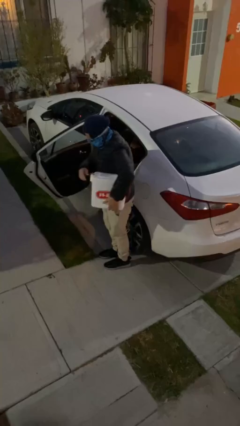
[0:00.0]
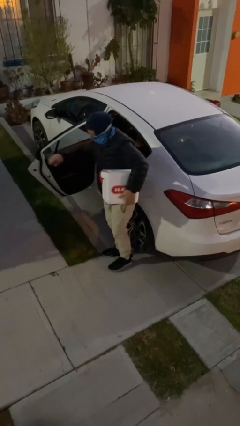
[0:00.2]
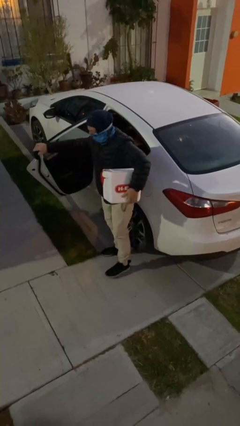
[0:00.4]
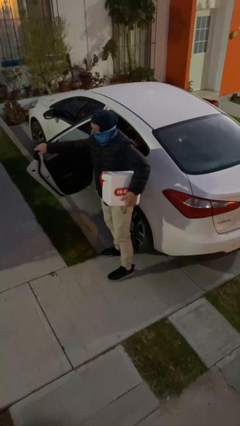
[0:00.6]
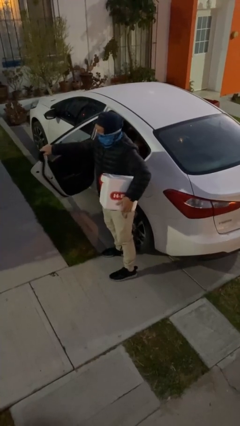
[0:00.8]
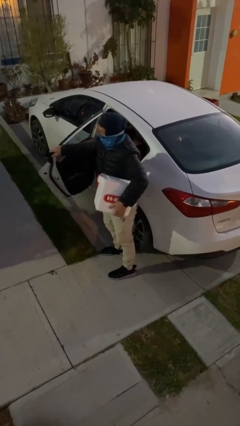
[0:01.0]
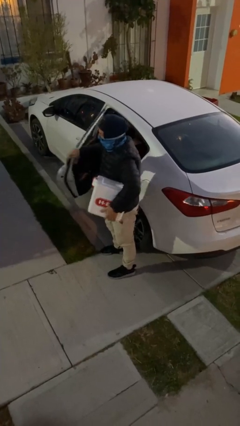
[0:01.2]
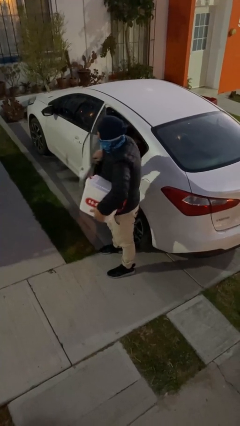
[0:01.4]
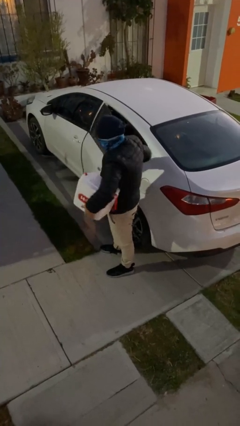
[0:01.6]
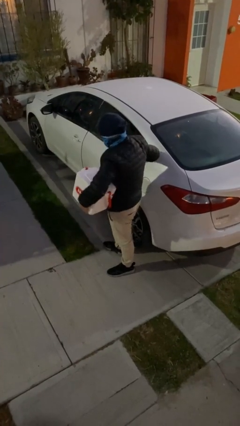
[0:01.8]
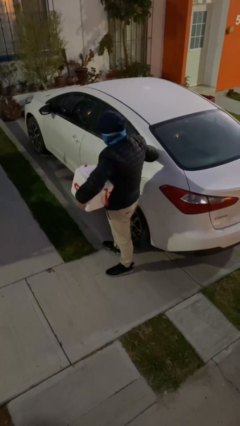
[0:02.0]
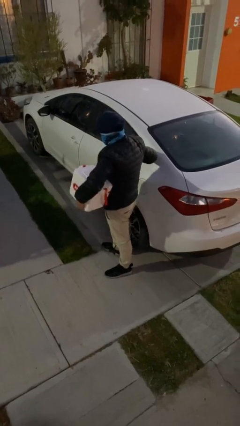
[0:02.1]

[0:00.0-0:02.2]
person closes car door

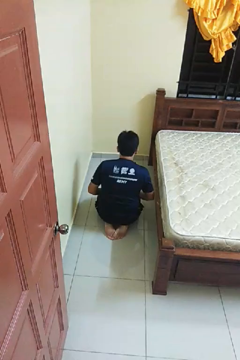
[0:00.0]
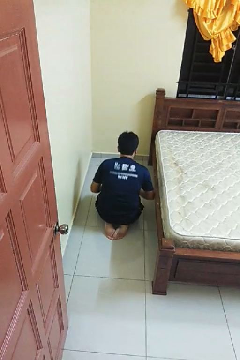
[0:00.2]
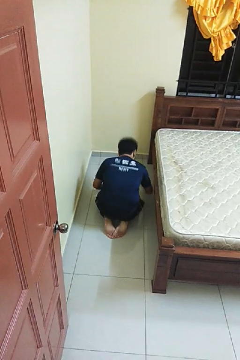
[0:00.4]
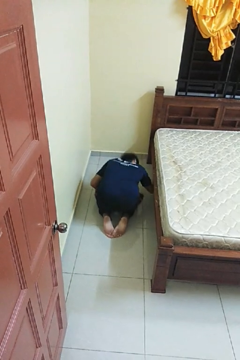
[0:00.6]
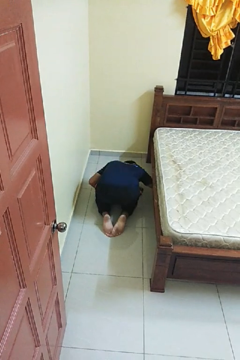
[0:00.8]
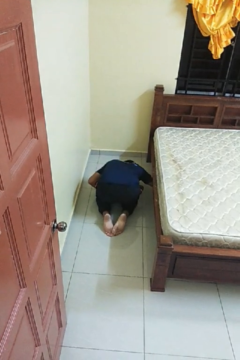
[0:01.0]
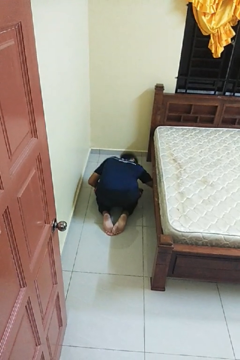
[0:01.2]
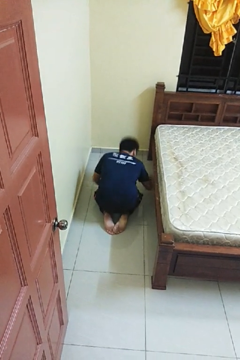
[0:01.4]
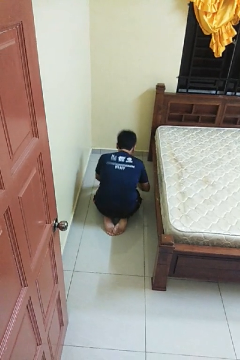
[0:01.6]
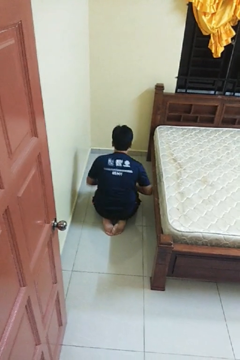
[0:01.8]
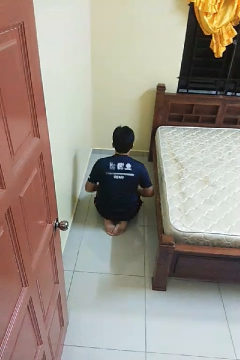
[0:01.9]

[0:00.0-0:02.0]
person searches under bed

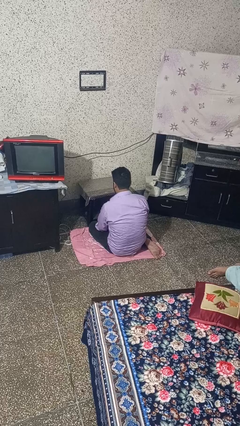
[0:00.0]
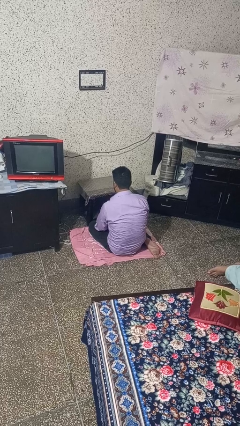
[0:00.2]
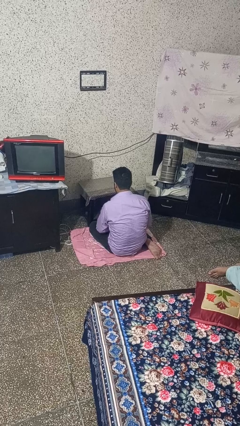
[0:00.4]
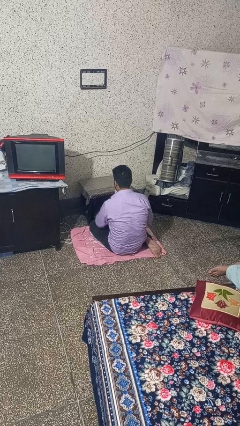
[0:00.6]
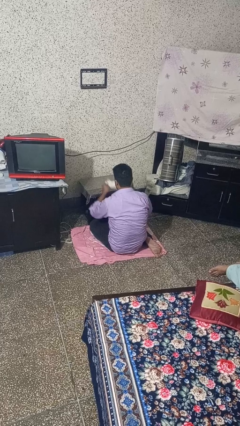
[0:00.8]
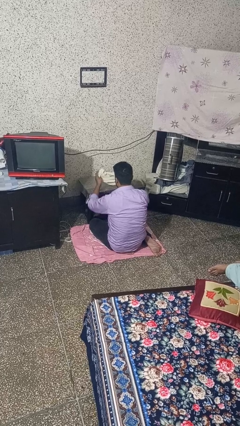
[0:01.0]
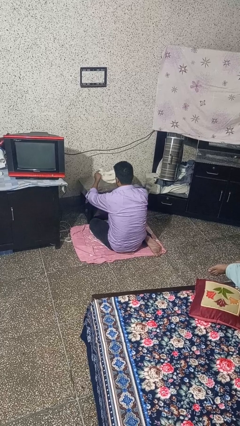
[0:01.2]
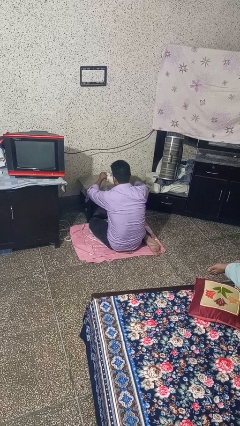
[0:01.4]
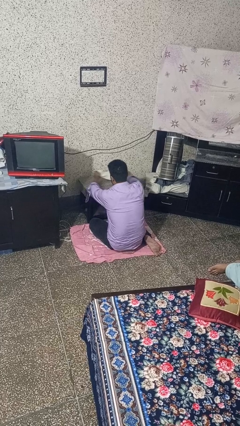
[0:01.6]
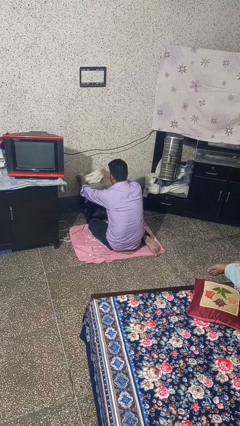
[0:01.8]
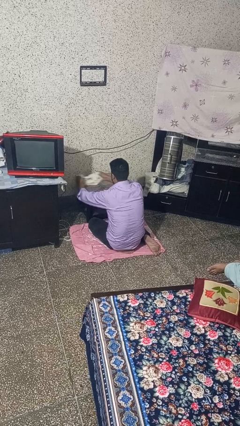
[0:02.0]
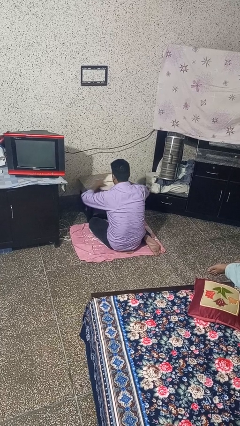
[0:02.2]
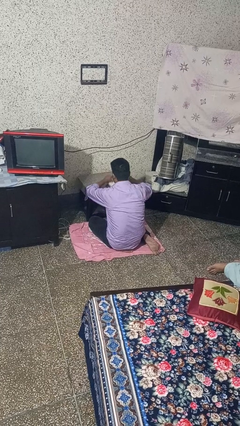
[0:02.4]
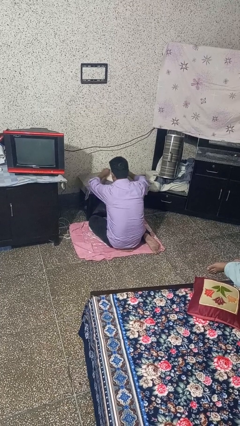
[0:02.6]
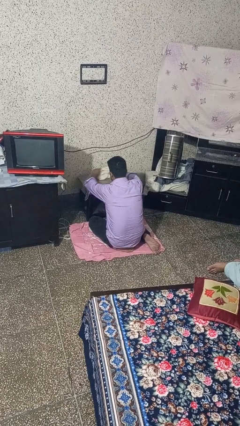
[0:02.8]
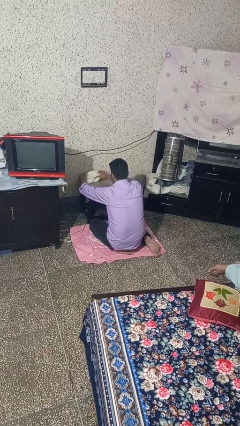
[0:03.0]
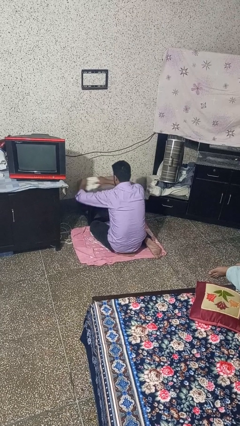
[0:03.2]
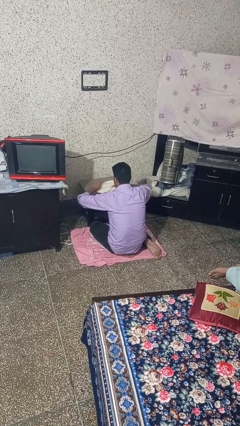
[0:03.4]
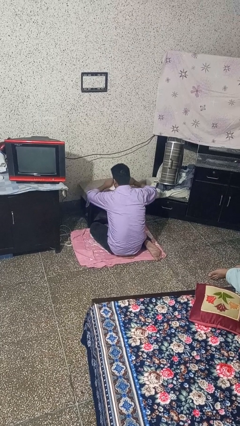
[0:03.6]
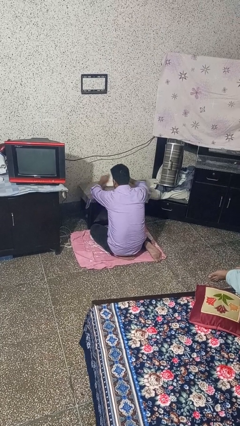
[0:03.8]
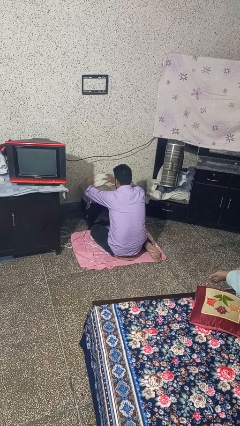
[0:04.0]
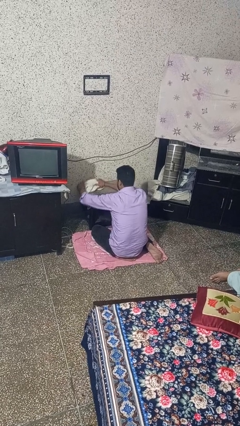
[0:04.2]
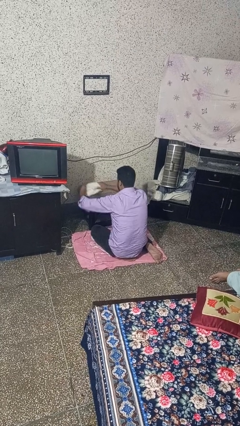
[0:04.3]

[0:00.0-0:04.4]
person cleans table with rag

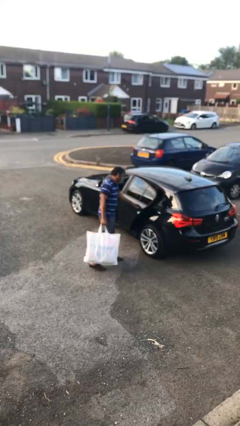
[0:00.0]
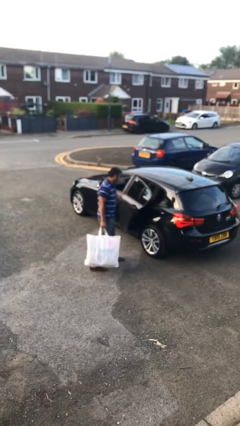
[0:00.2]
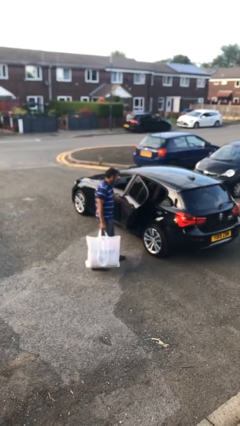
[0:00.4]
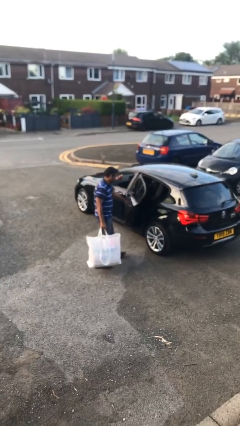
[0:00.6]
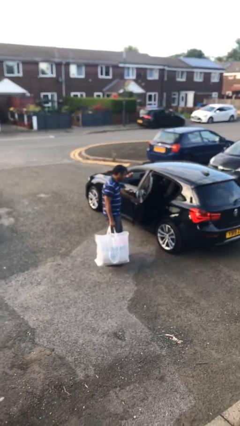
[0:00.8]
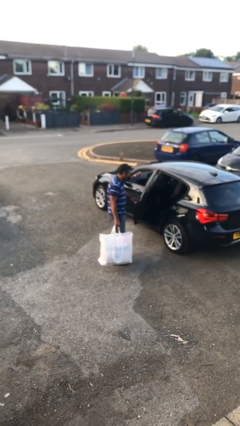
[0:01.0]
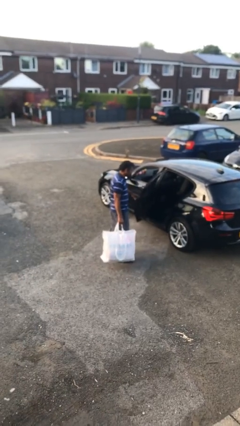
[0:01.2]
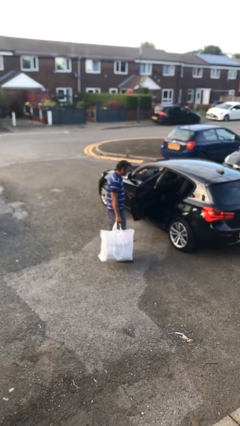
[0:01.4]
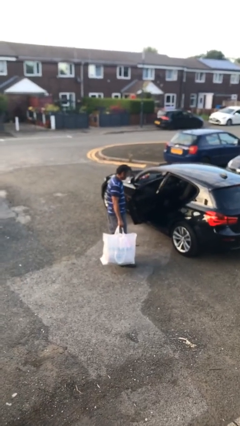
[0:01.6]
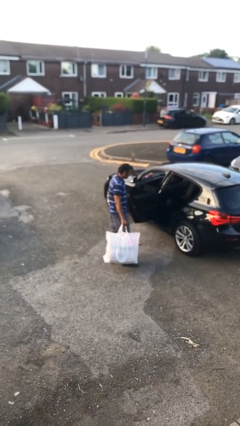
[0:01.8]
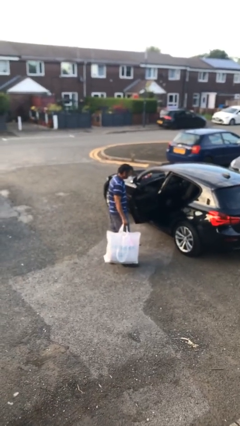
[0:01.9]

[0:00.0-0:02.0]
person opens car door

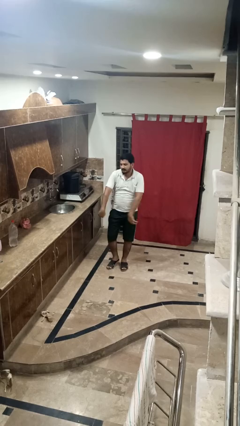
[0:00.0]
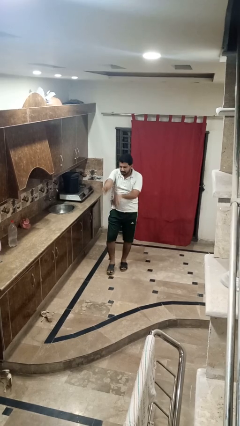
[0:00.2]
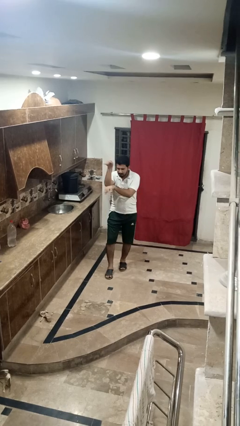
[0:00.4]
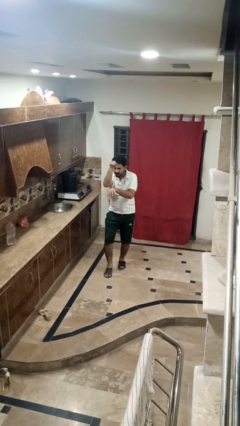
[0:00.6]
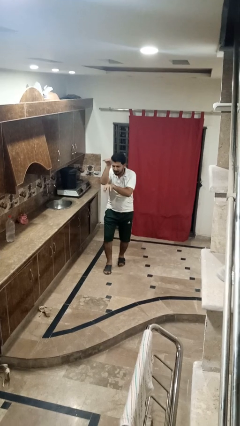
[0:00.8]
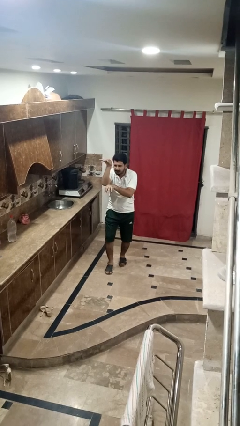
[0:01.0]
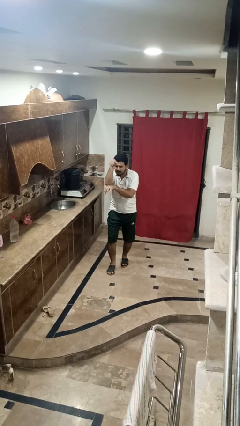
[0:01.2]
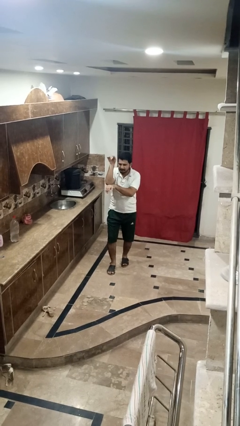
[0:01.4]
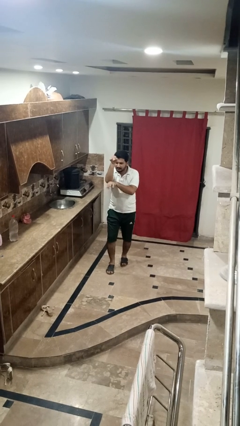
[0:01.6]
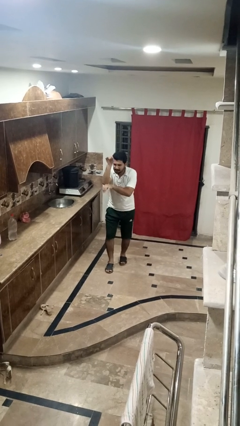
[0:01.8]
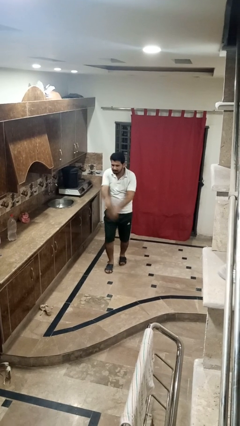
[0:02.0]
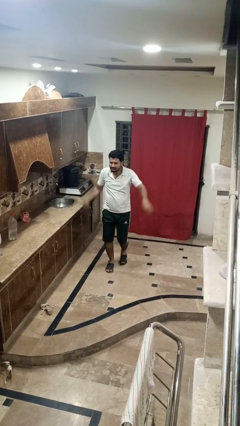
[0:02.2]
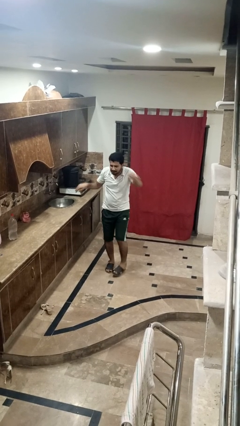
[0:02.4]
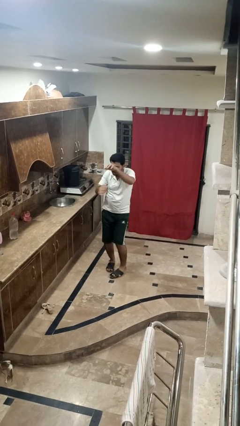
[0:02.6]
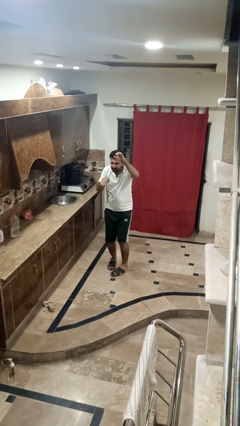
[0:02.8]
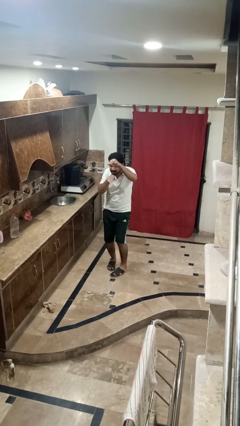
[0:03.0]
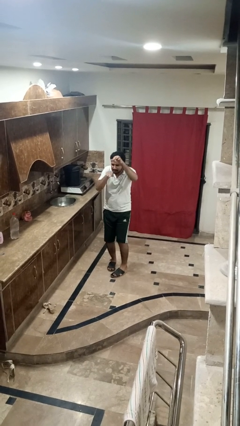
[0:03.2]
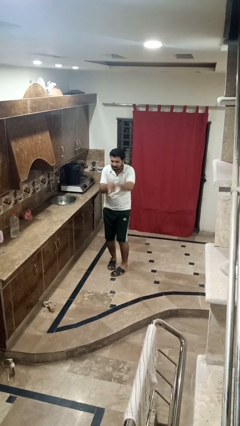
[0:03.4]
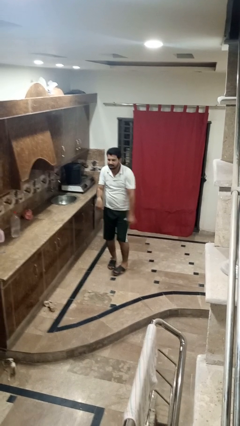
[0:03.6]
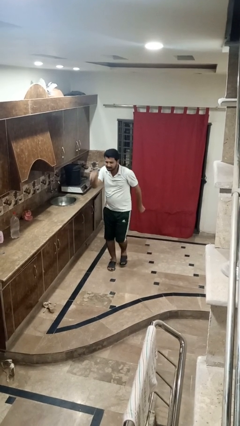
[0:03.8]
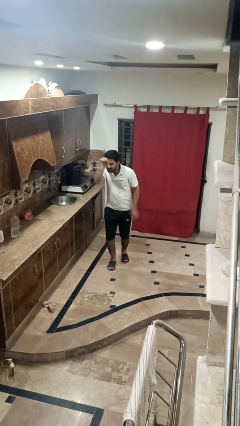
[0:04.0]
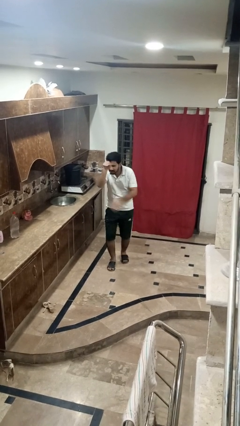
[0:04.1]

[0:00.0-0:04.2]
person dances in place

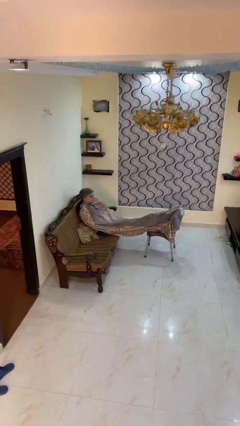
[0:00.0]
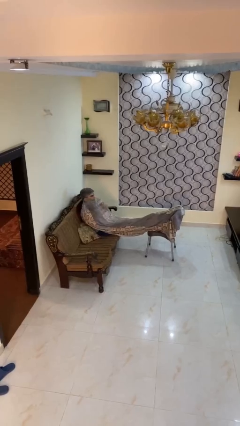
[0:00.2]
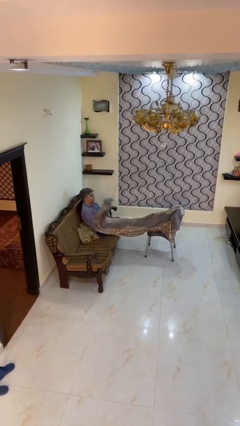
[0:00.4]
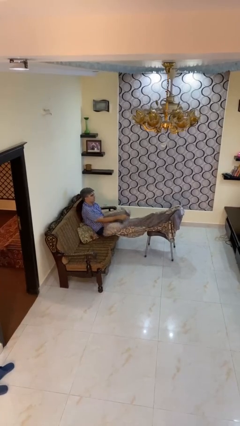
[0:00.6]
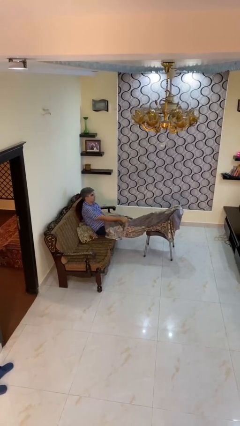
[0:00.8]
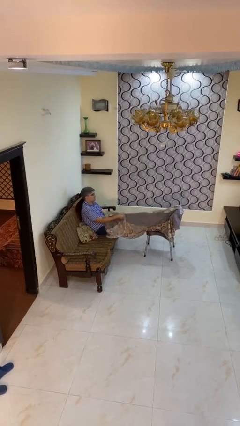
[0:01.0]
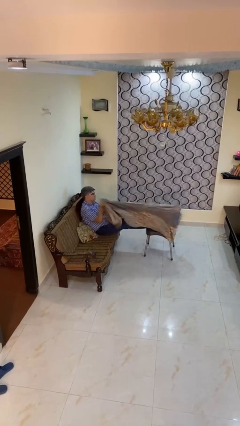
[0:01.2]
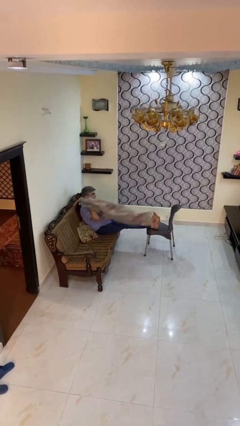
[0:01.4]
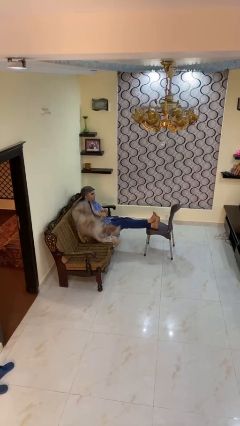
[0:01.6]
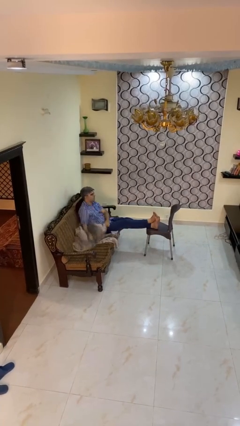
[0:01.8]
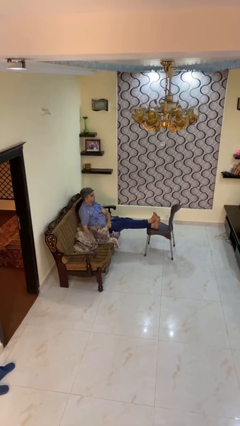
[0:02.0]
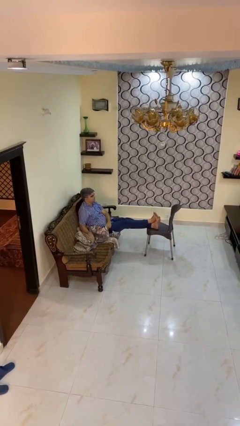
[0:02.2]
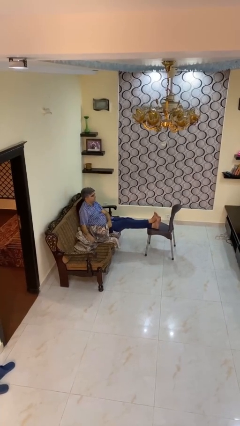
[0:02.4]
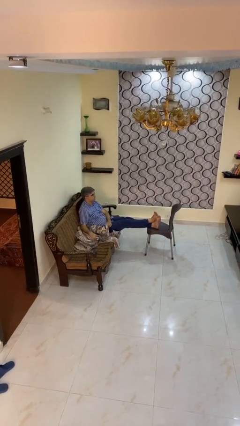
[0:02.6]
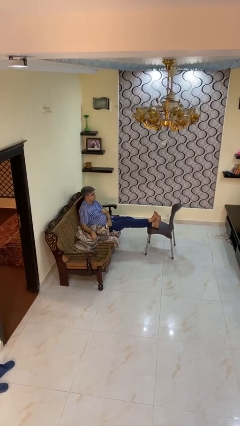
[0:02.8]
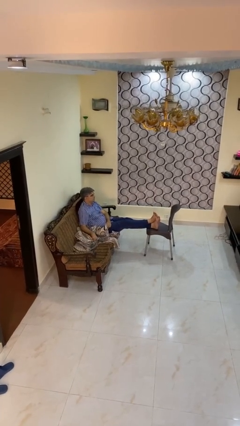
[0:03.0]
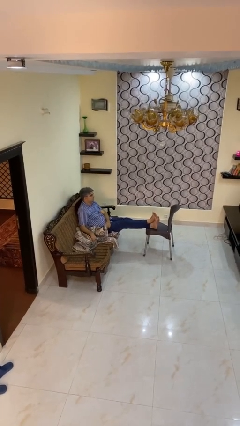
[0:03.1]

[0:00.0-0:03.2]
person uncovers with blanket
